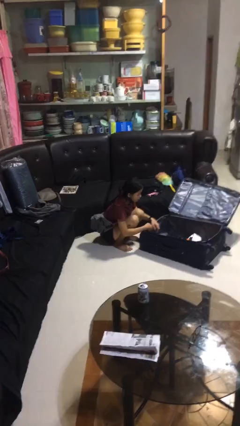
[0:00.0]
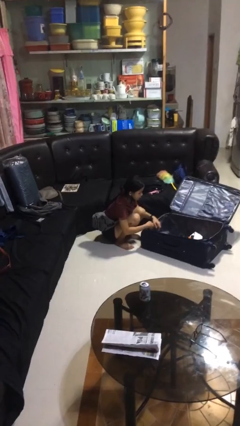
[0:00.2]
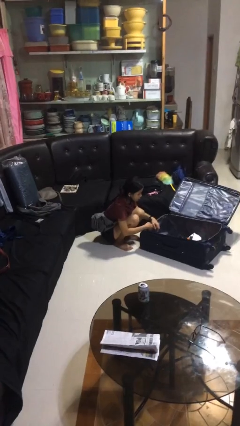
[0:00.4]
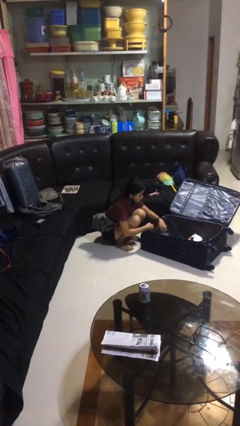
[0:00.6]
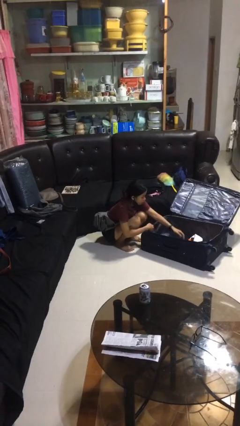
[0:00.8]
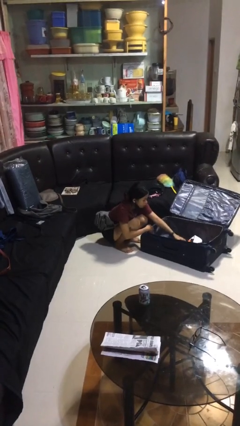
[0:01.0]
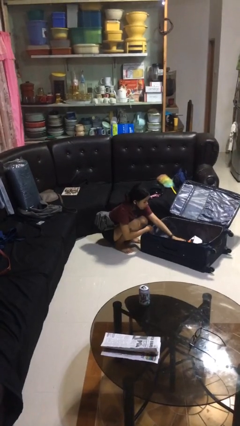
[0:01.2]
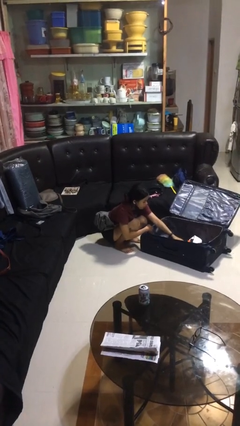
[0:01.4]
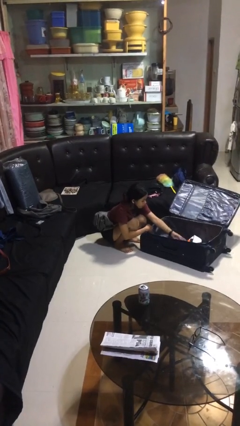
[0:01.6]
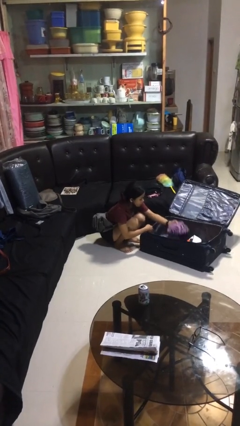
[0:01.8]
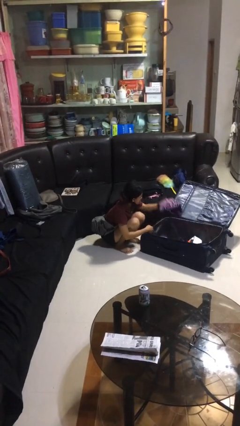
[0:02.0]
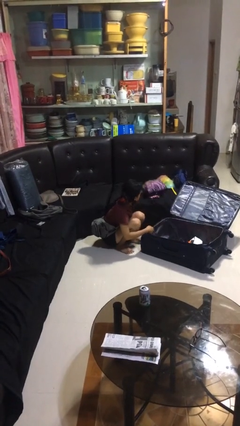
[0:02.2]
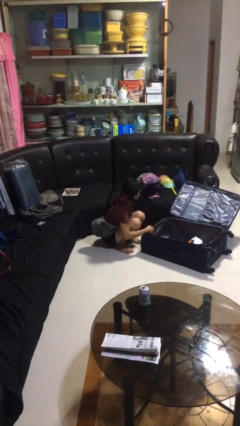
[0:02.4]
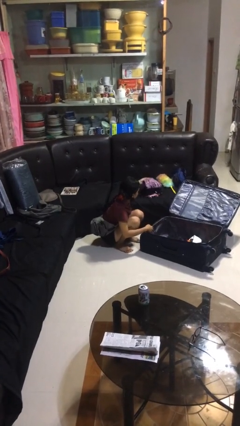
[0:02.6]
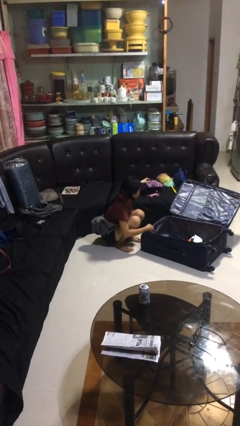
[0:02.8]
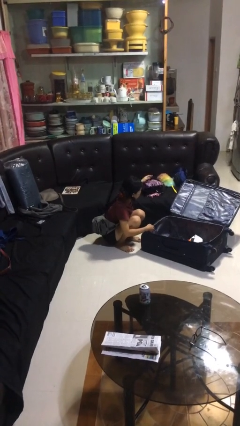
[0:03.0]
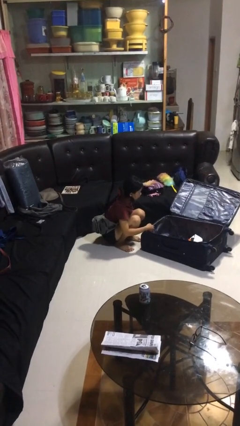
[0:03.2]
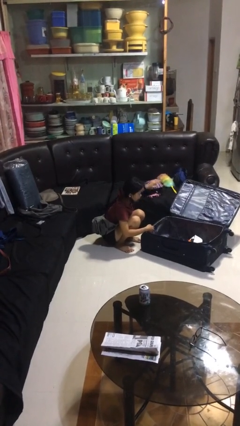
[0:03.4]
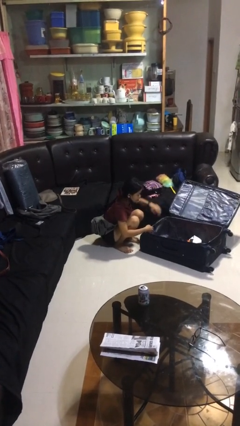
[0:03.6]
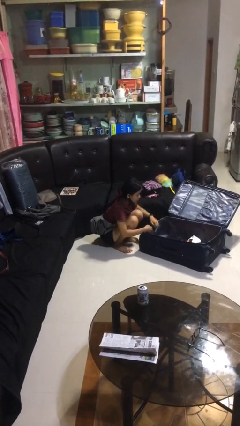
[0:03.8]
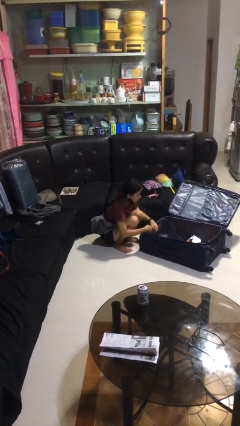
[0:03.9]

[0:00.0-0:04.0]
person loads clothes into suitcase

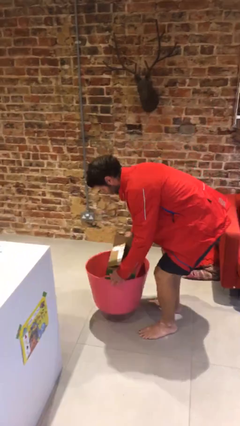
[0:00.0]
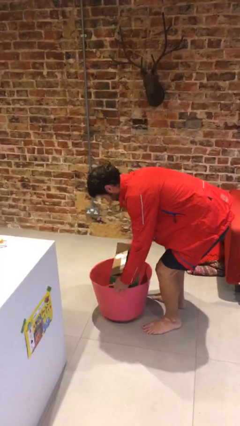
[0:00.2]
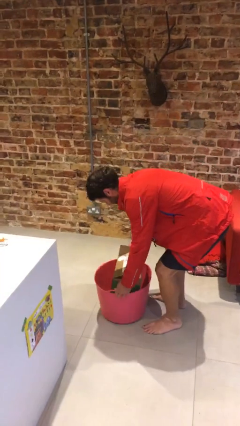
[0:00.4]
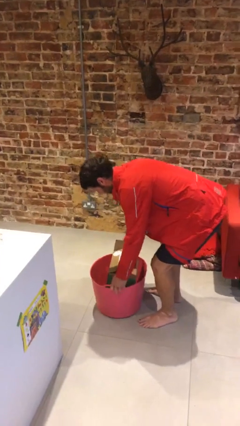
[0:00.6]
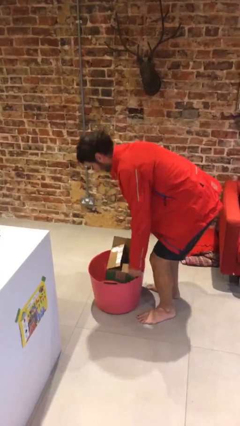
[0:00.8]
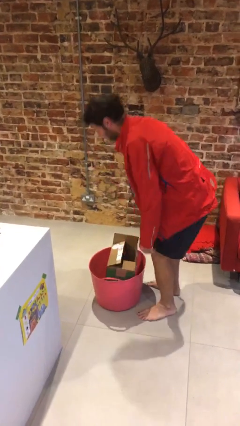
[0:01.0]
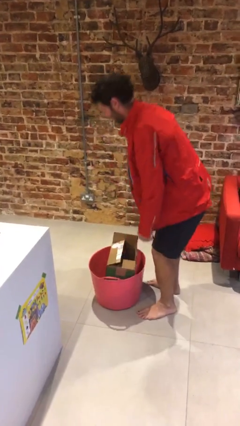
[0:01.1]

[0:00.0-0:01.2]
person puts down object on floor

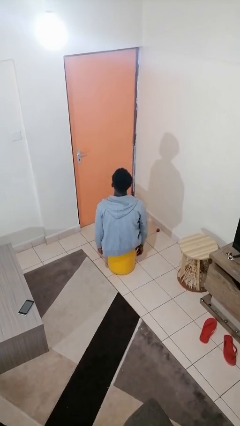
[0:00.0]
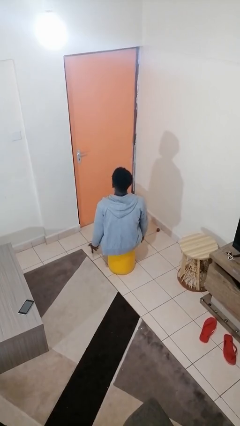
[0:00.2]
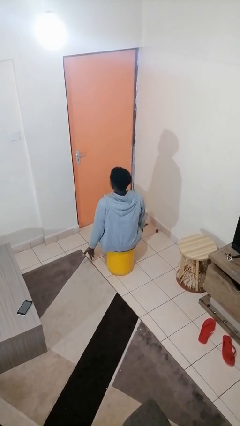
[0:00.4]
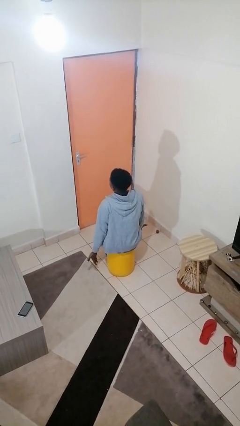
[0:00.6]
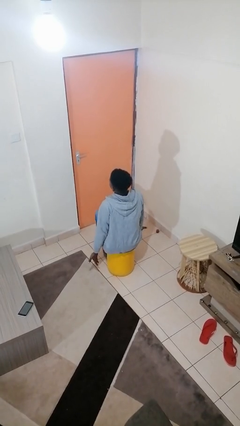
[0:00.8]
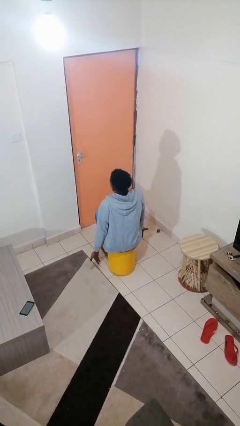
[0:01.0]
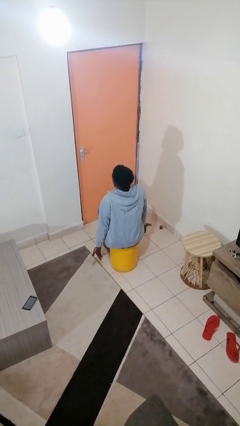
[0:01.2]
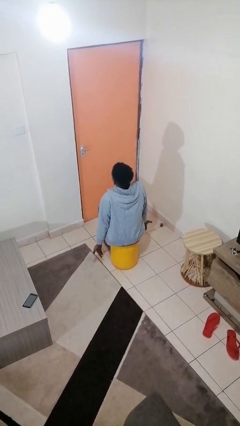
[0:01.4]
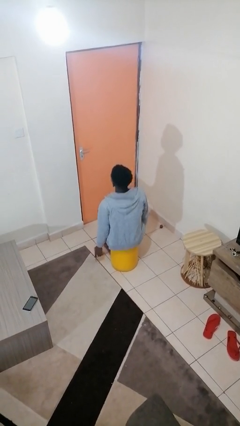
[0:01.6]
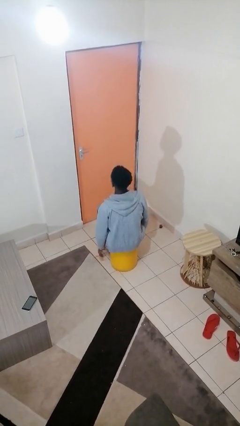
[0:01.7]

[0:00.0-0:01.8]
person shrugs

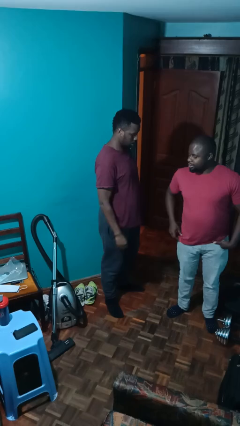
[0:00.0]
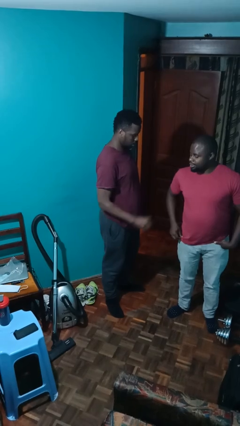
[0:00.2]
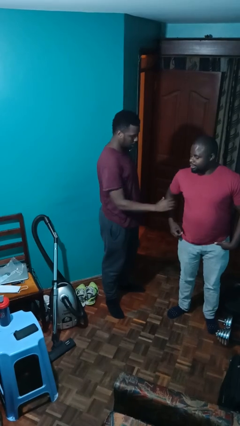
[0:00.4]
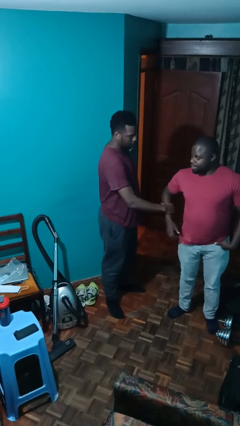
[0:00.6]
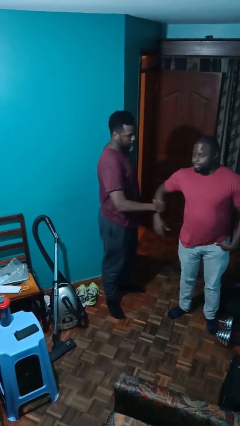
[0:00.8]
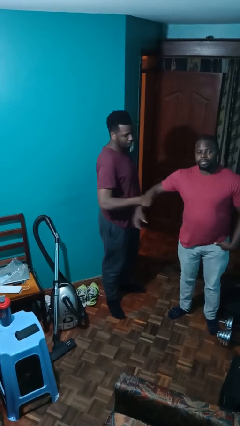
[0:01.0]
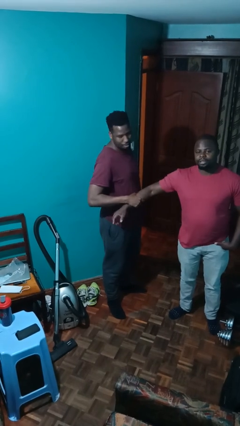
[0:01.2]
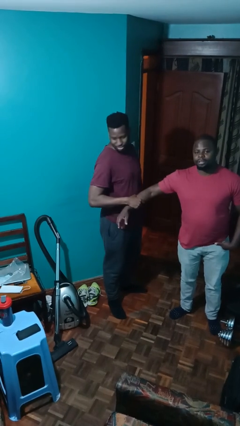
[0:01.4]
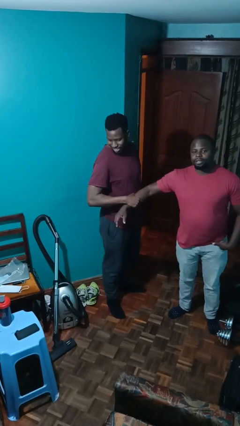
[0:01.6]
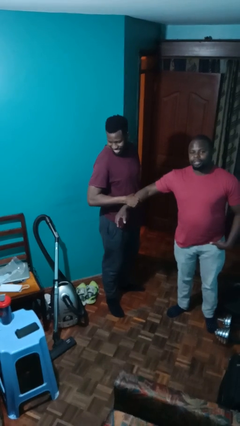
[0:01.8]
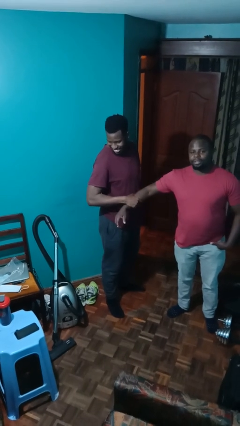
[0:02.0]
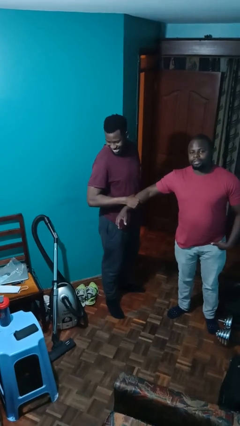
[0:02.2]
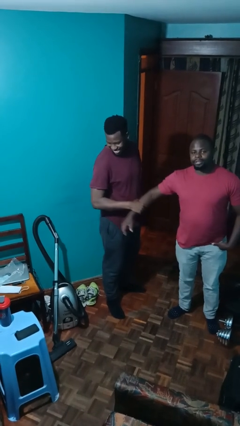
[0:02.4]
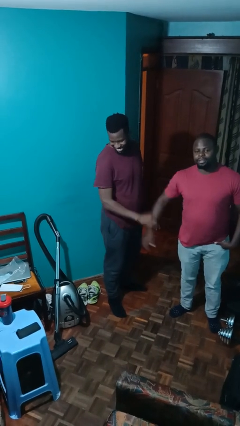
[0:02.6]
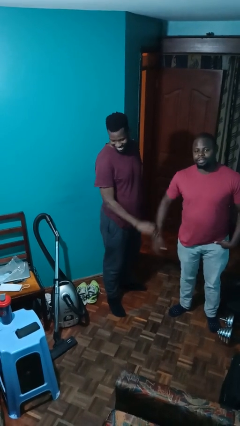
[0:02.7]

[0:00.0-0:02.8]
person grabs person by forearm

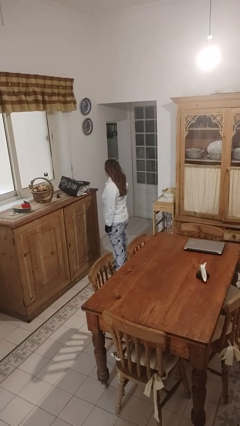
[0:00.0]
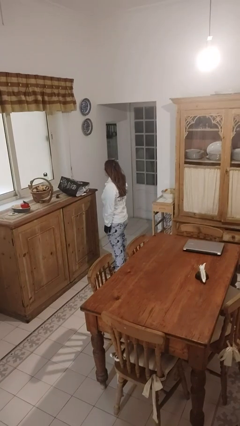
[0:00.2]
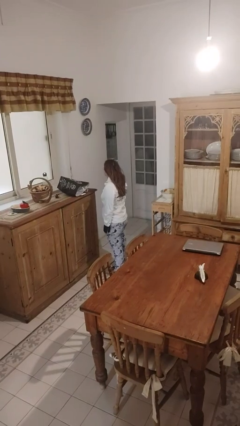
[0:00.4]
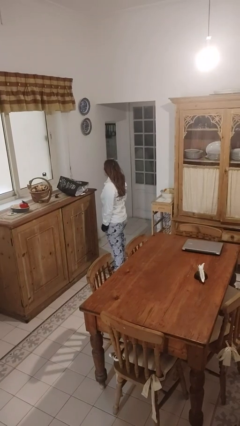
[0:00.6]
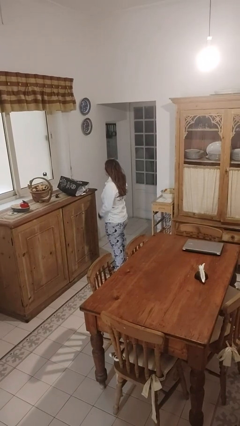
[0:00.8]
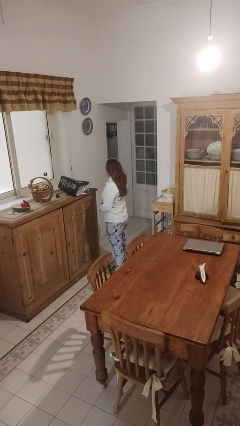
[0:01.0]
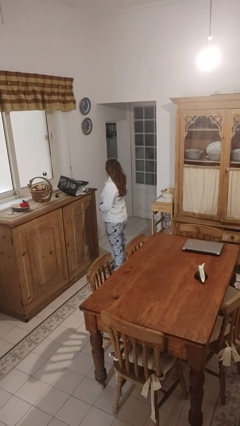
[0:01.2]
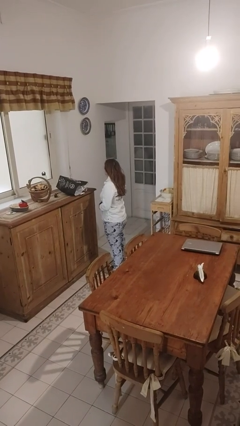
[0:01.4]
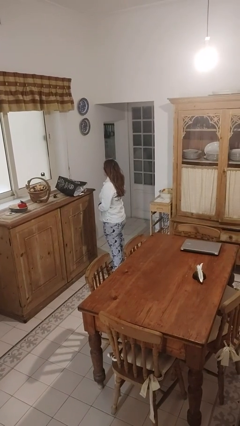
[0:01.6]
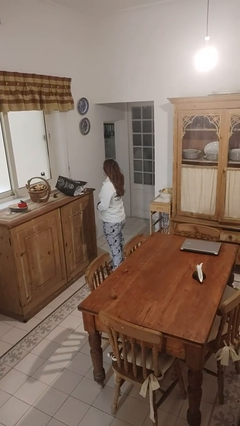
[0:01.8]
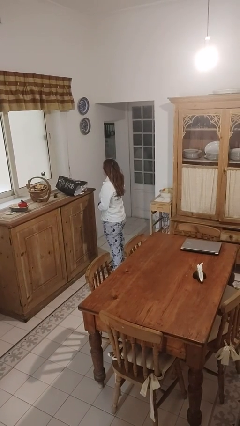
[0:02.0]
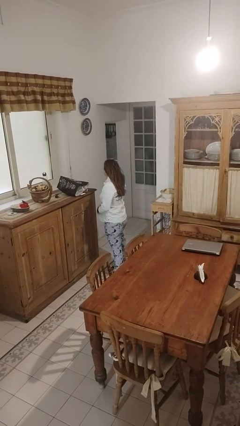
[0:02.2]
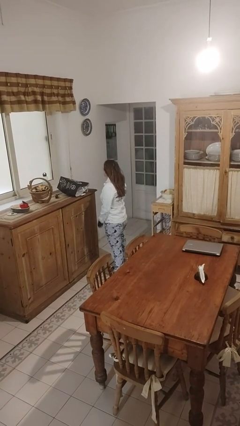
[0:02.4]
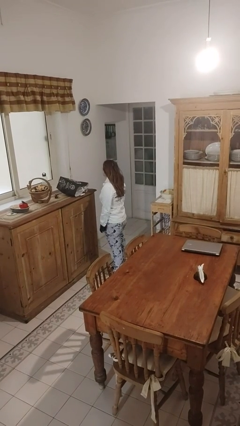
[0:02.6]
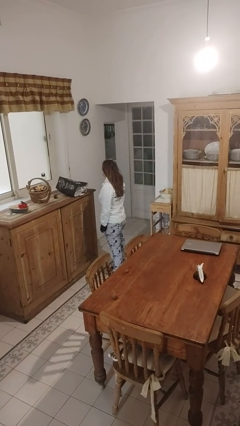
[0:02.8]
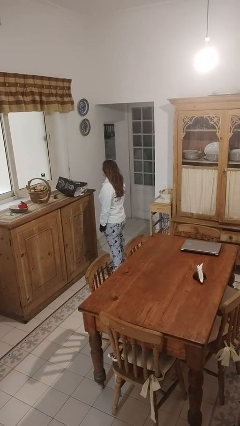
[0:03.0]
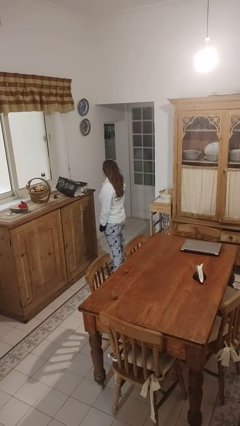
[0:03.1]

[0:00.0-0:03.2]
person buttons shirt

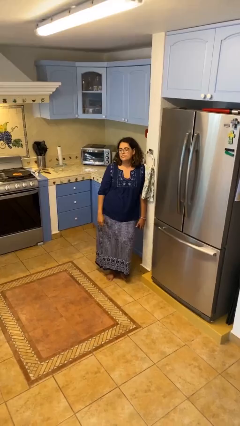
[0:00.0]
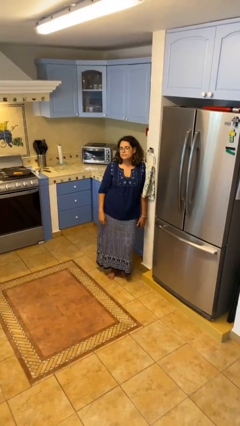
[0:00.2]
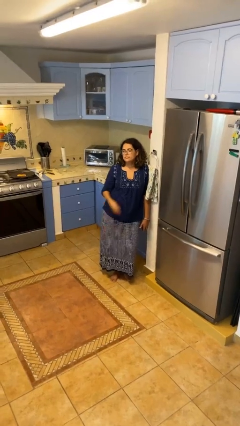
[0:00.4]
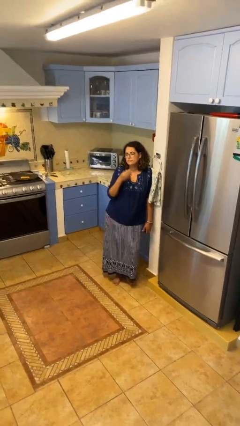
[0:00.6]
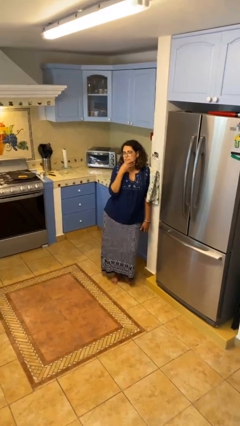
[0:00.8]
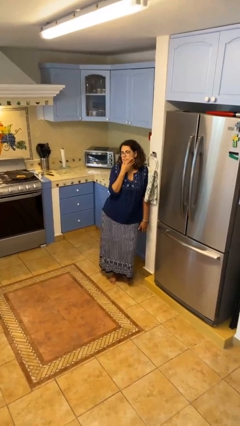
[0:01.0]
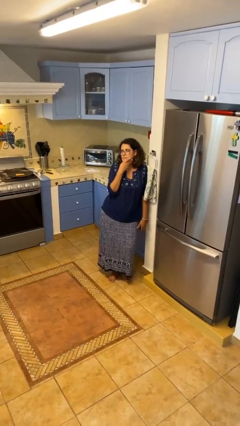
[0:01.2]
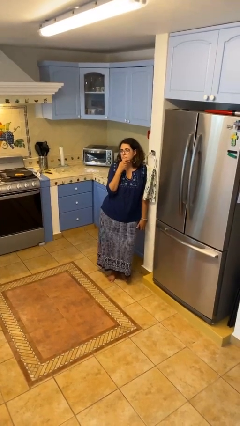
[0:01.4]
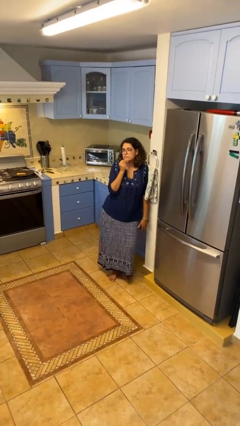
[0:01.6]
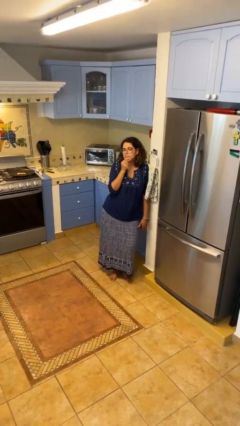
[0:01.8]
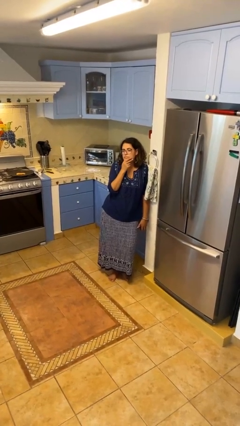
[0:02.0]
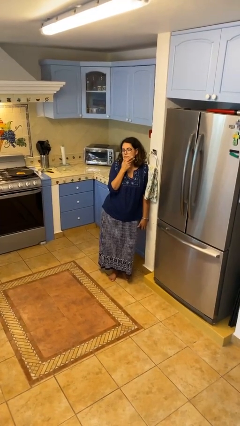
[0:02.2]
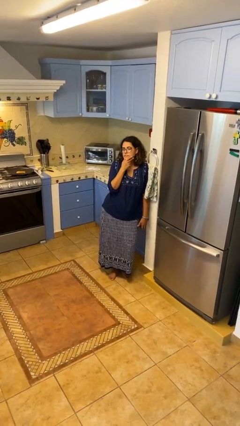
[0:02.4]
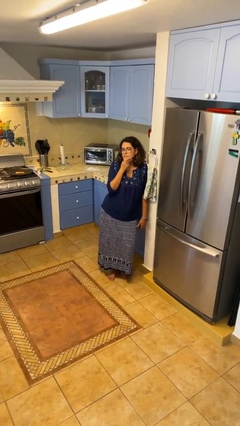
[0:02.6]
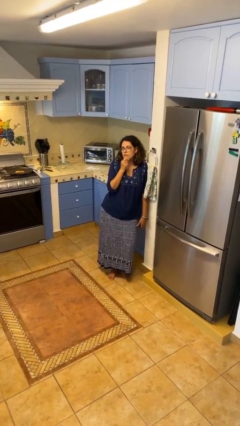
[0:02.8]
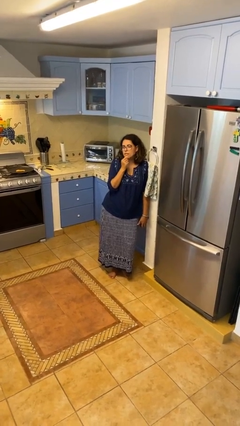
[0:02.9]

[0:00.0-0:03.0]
person strokes chin

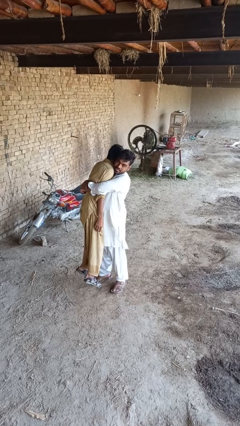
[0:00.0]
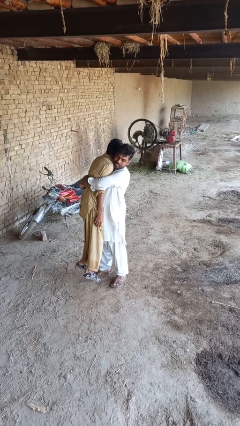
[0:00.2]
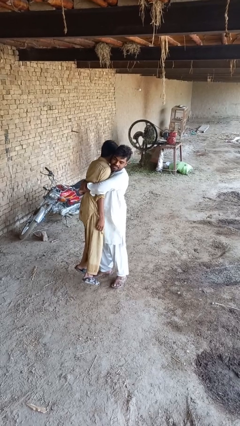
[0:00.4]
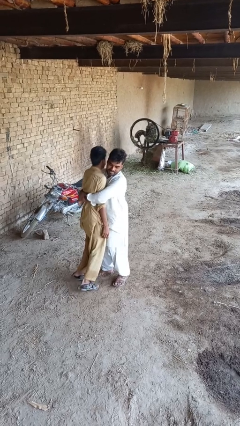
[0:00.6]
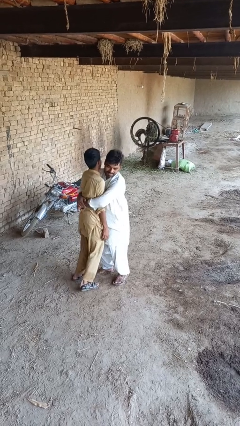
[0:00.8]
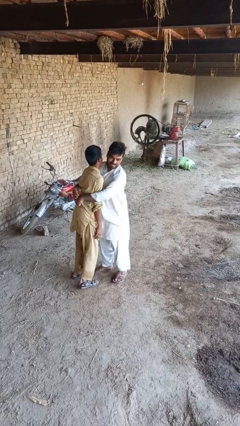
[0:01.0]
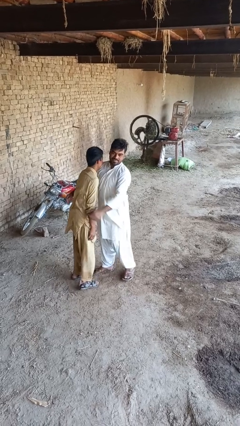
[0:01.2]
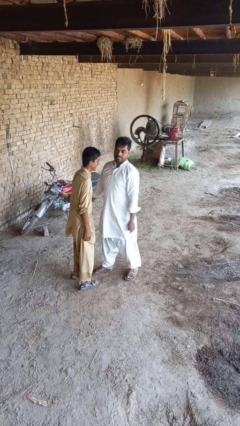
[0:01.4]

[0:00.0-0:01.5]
person puts down person
